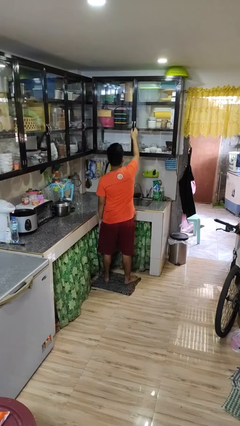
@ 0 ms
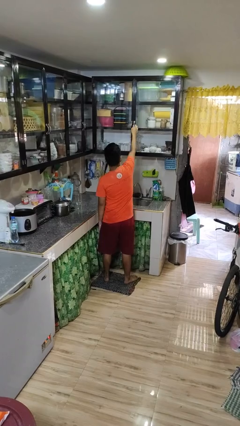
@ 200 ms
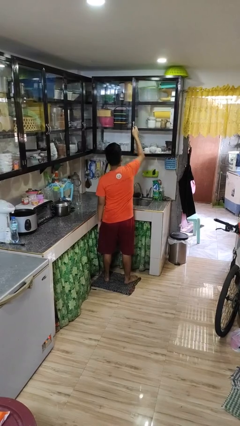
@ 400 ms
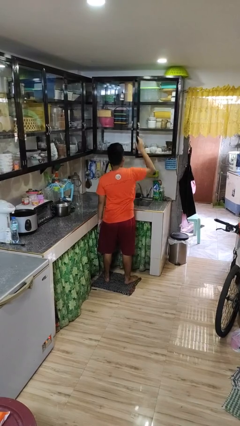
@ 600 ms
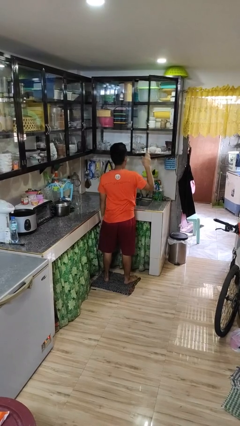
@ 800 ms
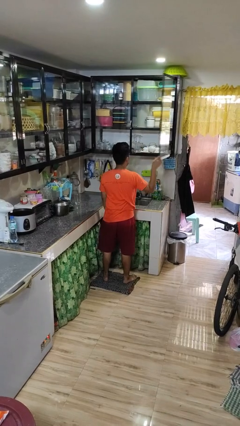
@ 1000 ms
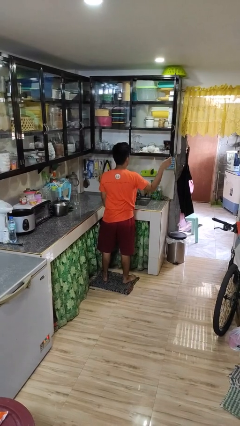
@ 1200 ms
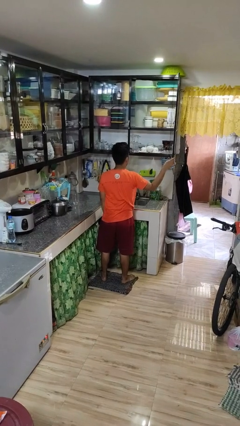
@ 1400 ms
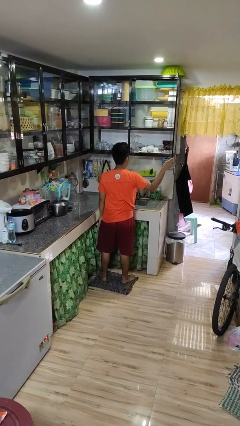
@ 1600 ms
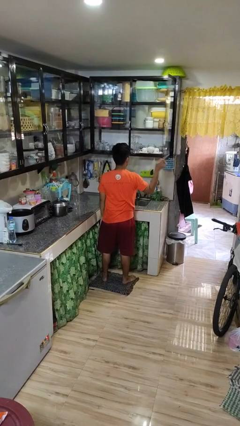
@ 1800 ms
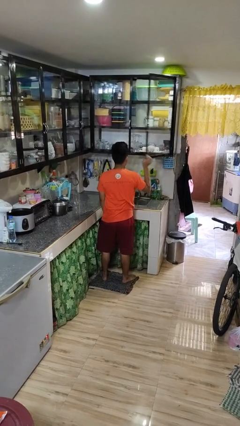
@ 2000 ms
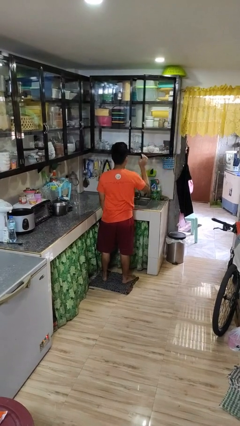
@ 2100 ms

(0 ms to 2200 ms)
person opens cabinet

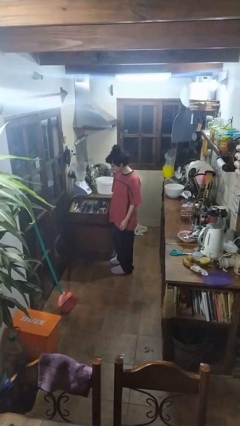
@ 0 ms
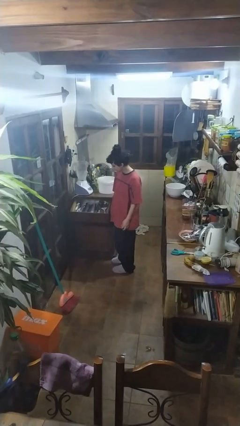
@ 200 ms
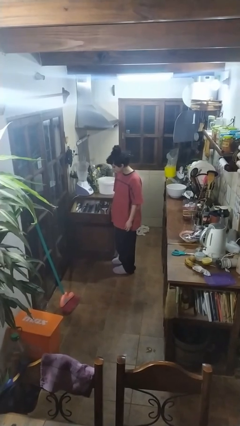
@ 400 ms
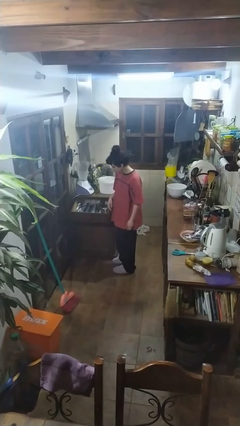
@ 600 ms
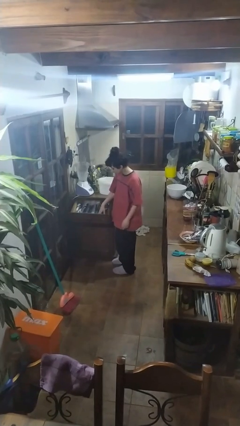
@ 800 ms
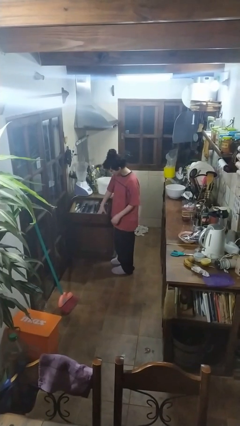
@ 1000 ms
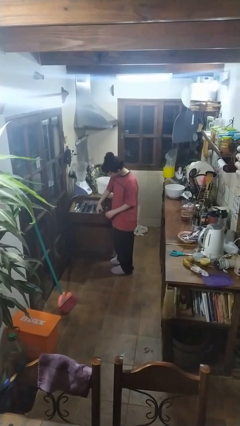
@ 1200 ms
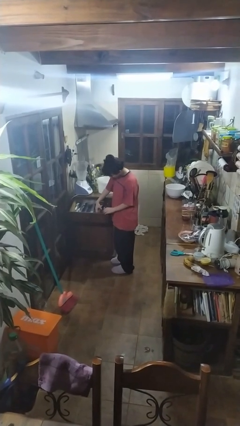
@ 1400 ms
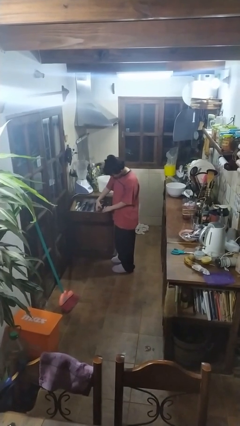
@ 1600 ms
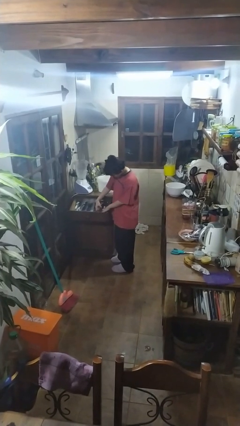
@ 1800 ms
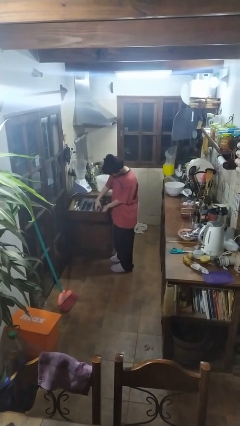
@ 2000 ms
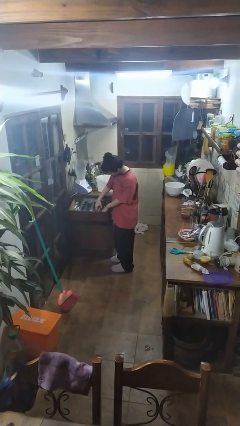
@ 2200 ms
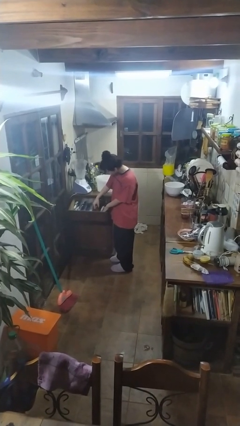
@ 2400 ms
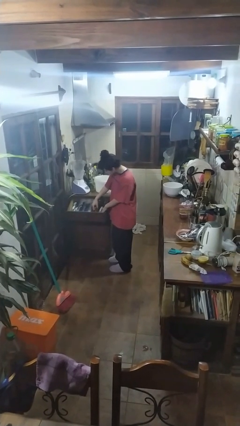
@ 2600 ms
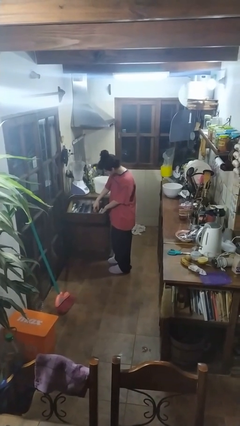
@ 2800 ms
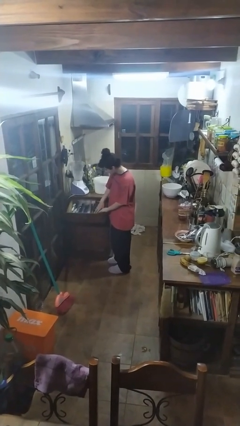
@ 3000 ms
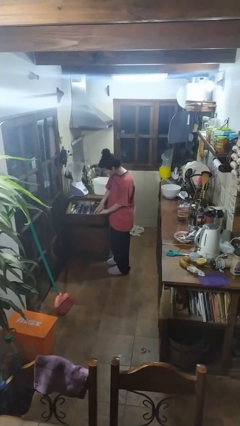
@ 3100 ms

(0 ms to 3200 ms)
person searches in kitchen drawer

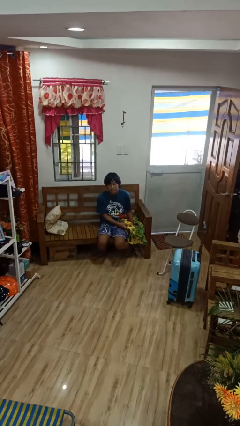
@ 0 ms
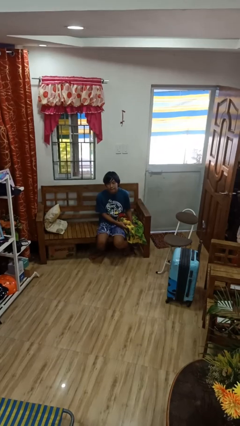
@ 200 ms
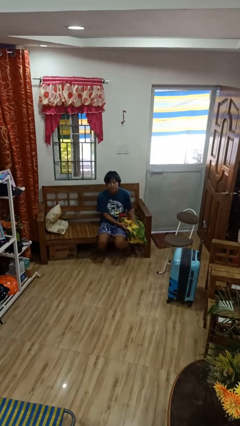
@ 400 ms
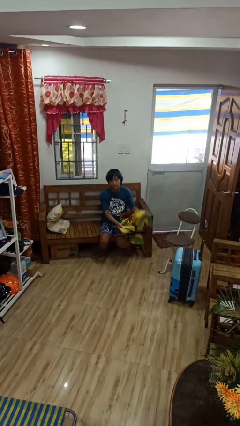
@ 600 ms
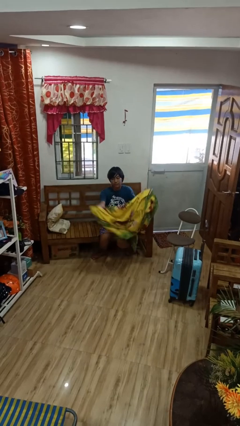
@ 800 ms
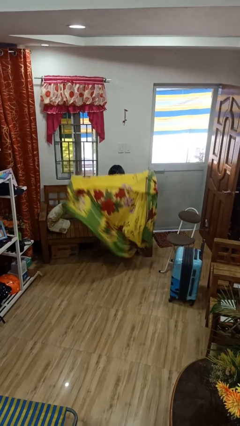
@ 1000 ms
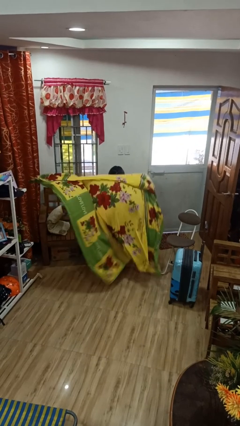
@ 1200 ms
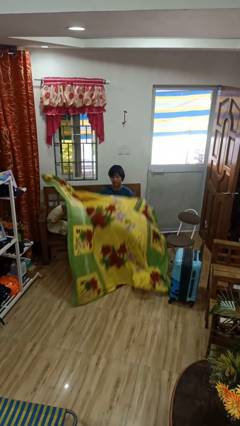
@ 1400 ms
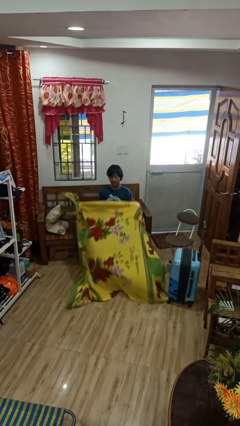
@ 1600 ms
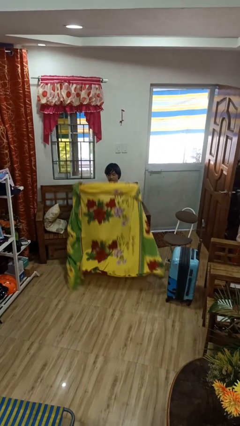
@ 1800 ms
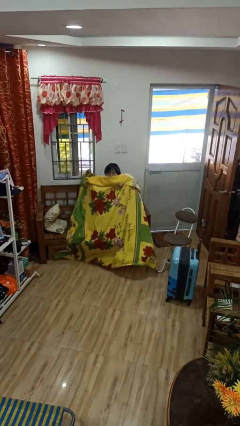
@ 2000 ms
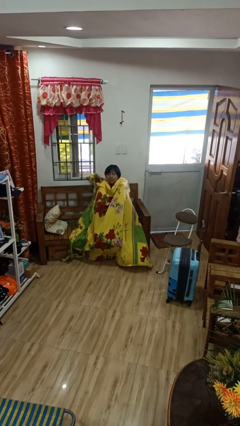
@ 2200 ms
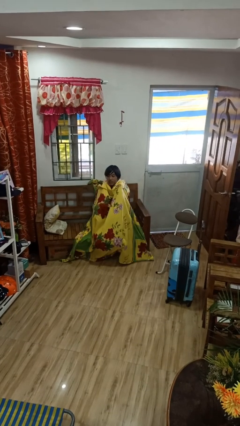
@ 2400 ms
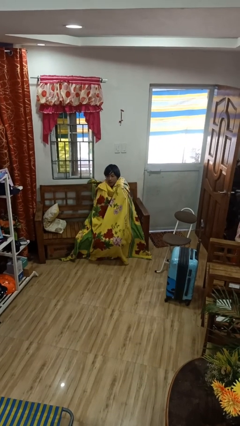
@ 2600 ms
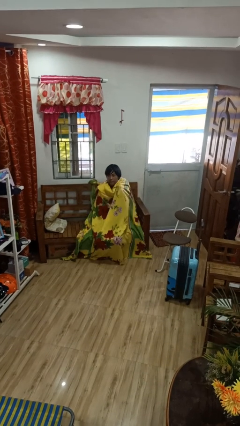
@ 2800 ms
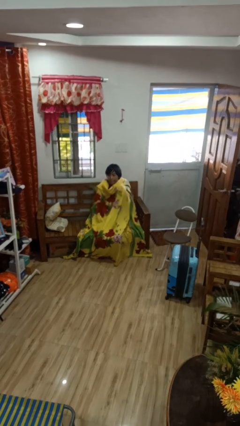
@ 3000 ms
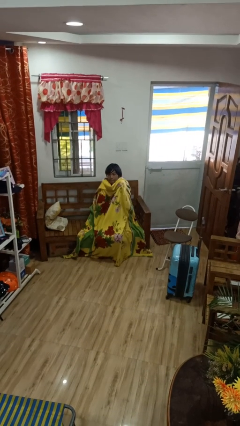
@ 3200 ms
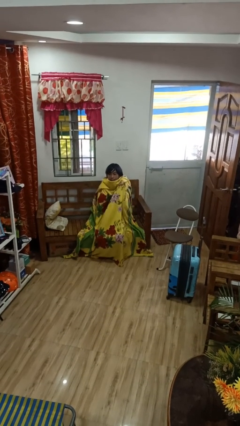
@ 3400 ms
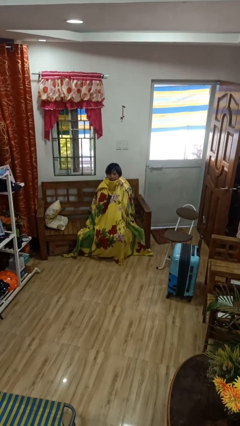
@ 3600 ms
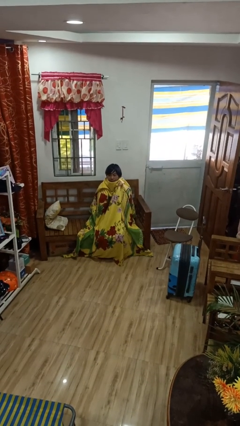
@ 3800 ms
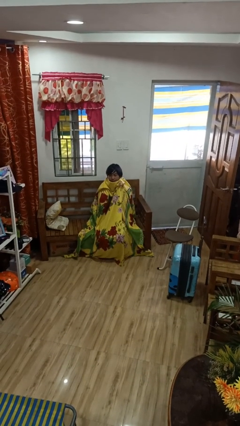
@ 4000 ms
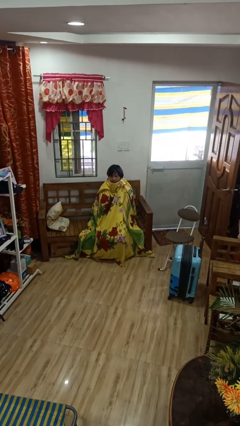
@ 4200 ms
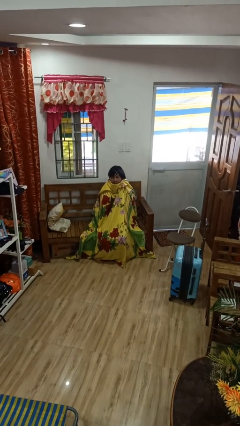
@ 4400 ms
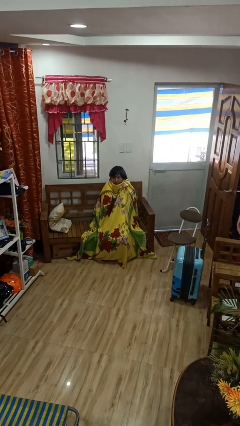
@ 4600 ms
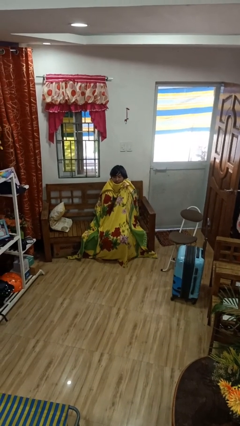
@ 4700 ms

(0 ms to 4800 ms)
person covers with blanket

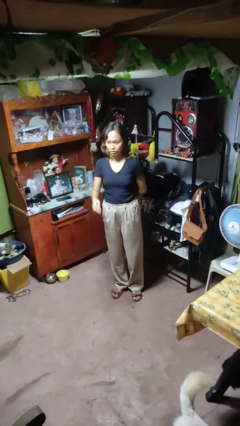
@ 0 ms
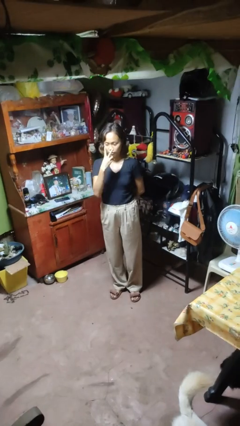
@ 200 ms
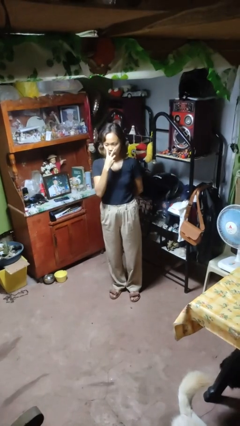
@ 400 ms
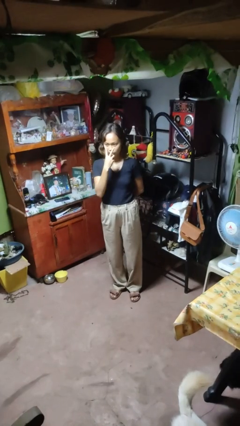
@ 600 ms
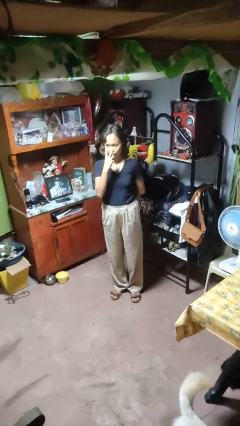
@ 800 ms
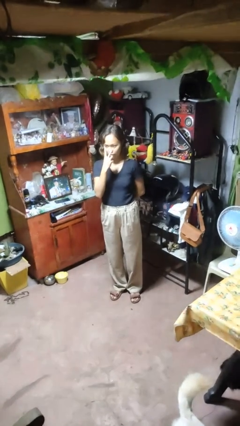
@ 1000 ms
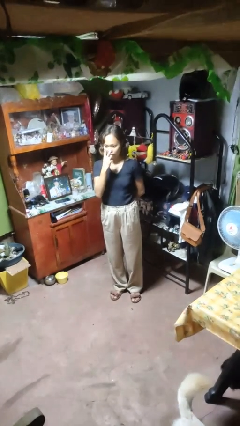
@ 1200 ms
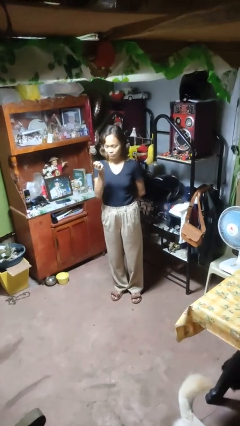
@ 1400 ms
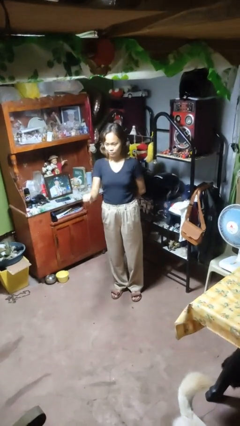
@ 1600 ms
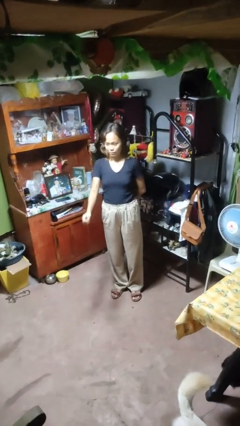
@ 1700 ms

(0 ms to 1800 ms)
person gestures watch closely

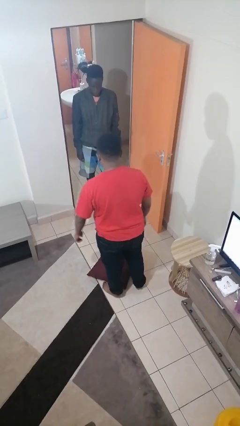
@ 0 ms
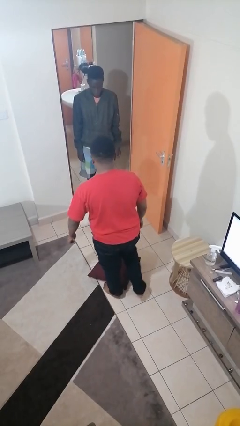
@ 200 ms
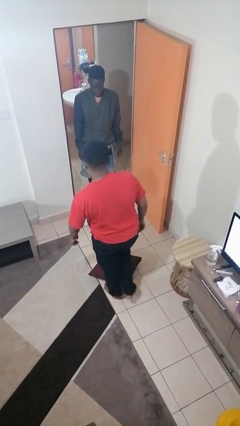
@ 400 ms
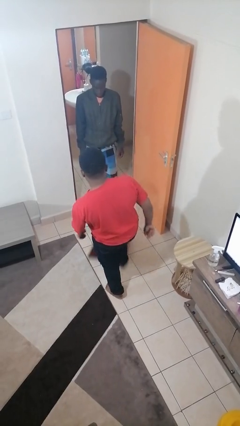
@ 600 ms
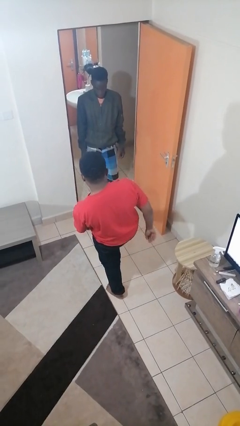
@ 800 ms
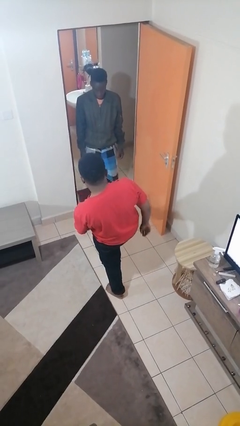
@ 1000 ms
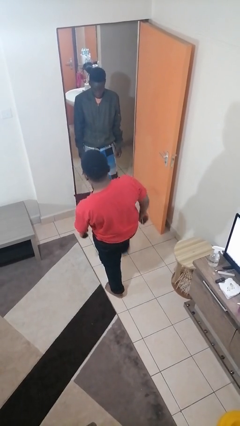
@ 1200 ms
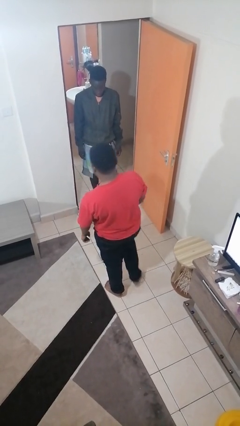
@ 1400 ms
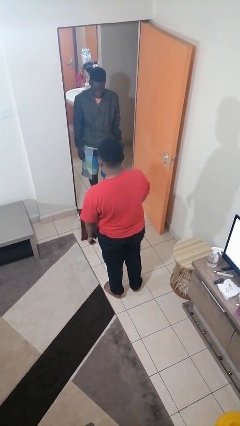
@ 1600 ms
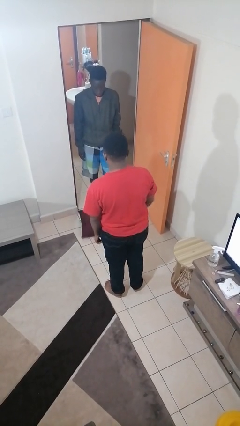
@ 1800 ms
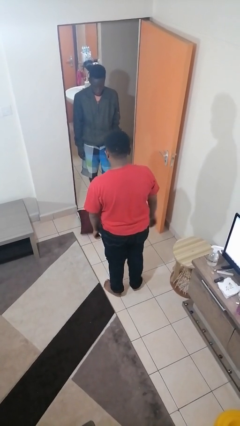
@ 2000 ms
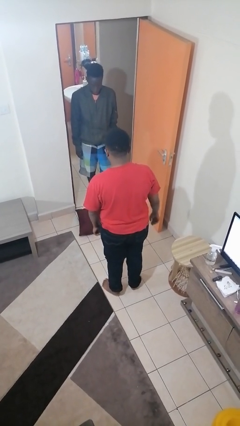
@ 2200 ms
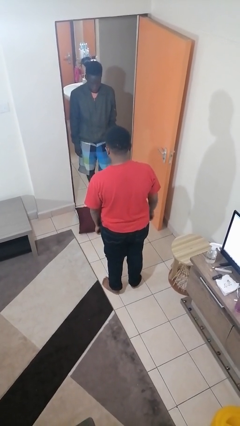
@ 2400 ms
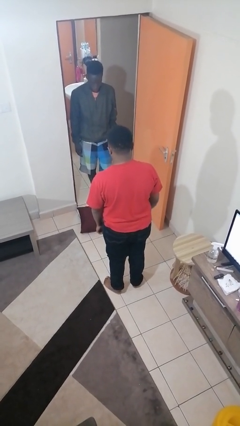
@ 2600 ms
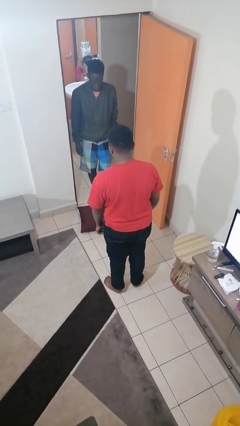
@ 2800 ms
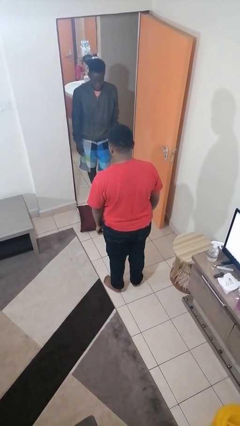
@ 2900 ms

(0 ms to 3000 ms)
person kicks object to person

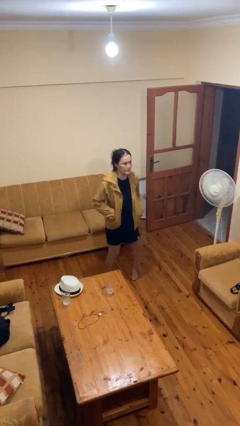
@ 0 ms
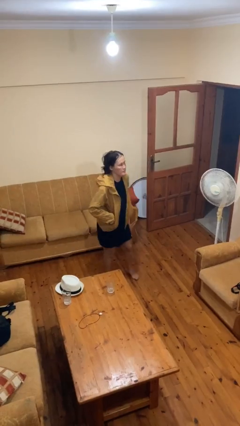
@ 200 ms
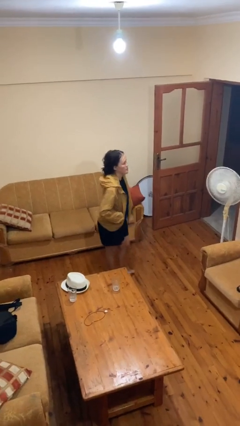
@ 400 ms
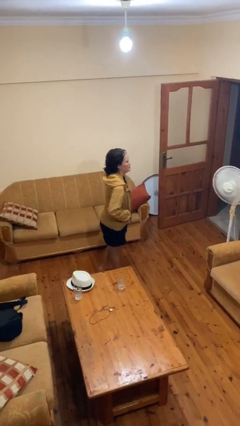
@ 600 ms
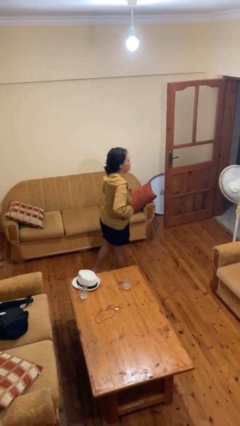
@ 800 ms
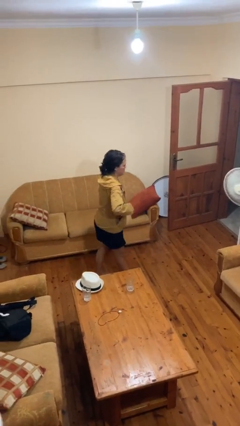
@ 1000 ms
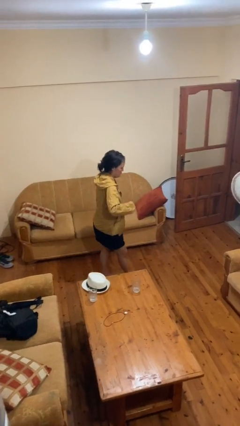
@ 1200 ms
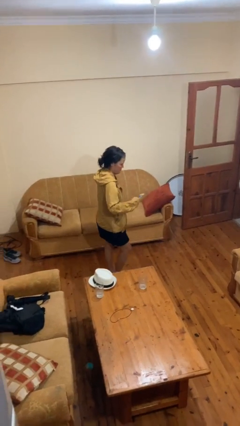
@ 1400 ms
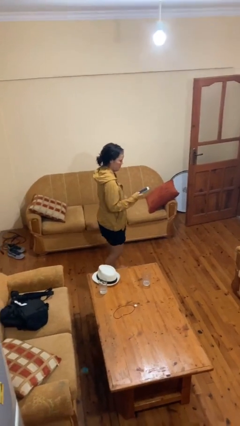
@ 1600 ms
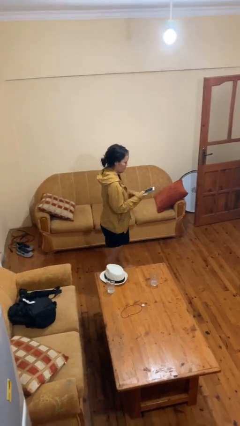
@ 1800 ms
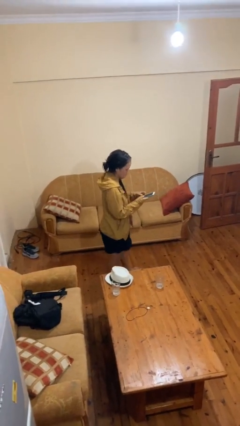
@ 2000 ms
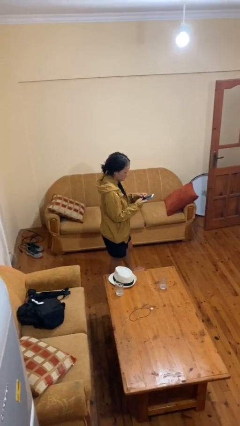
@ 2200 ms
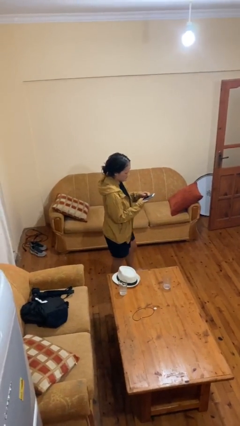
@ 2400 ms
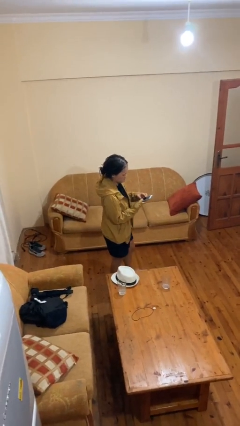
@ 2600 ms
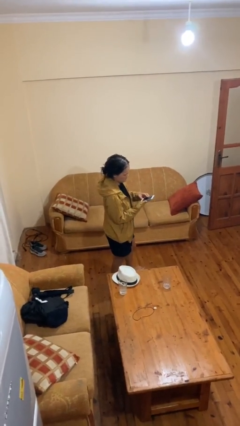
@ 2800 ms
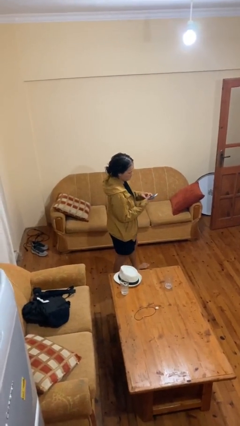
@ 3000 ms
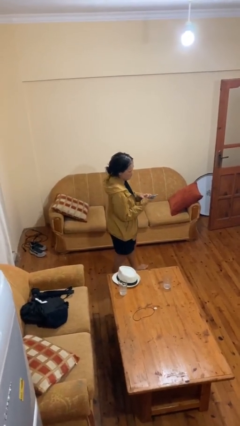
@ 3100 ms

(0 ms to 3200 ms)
person takes phone from pocket
